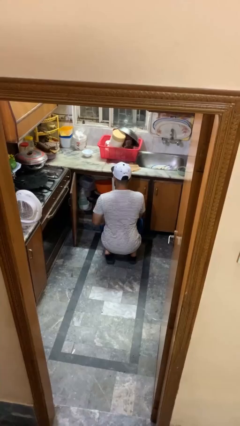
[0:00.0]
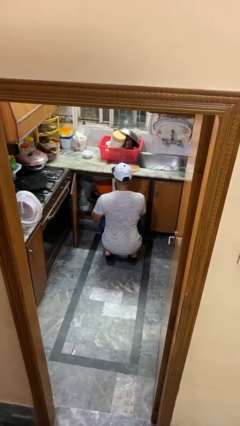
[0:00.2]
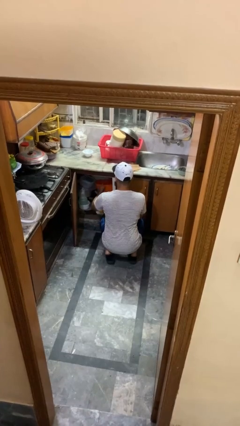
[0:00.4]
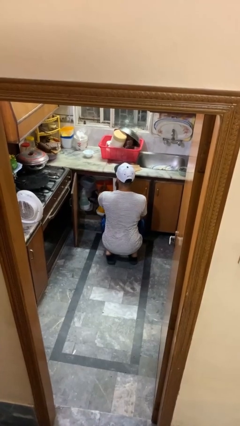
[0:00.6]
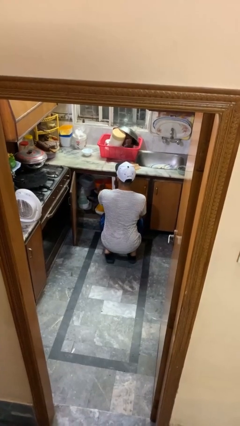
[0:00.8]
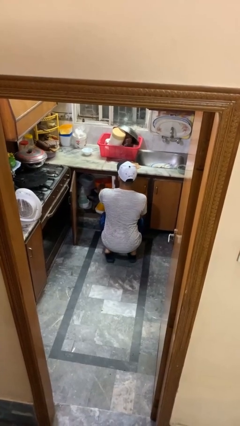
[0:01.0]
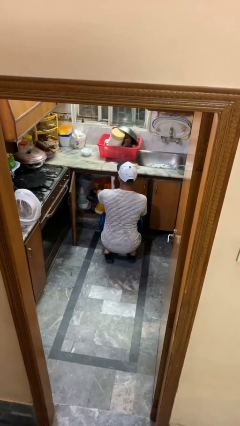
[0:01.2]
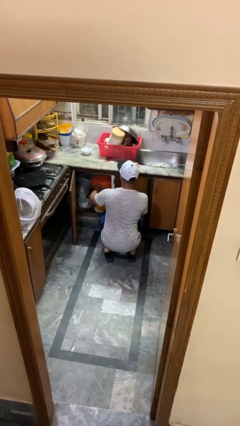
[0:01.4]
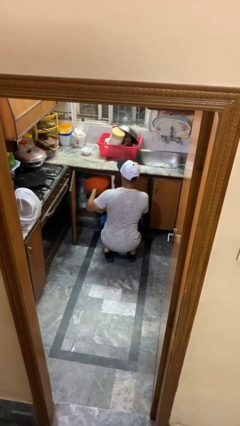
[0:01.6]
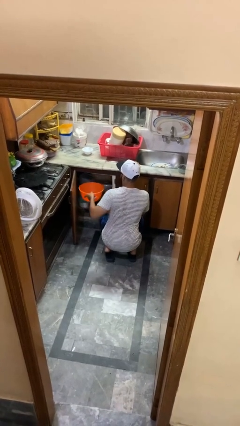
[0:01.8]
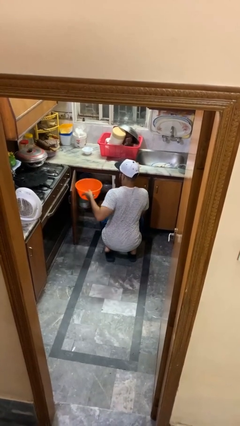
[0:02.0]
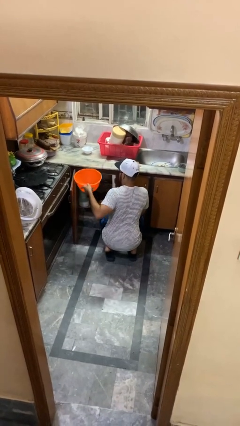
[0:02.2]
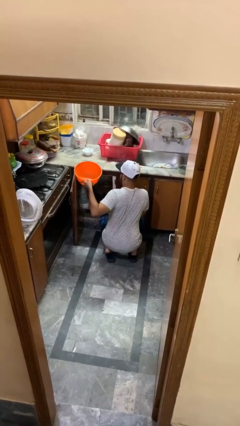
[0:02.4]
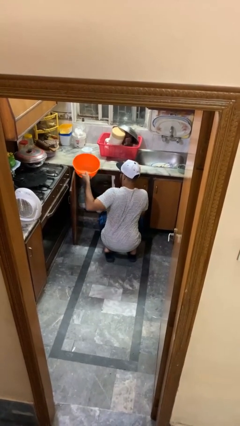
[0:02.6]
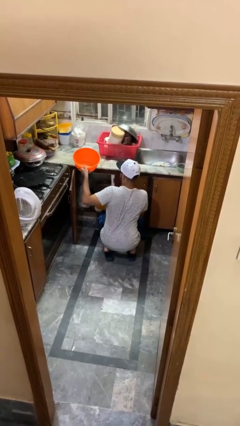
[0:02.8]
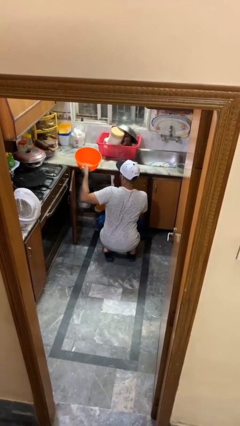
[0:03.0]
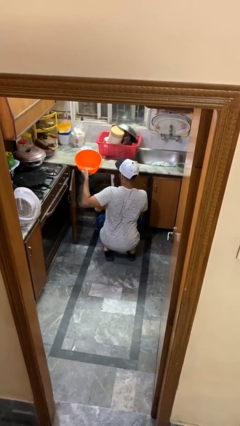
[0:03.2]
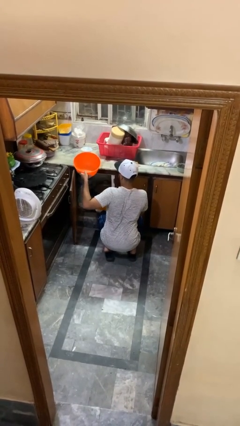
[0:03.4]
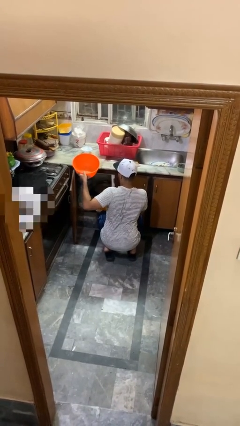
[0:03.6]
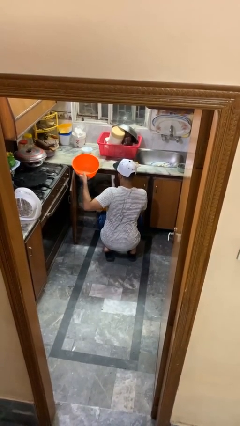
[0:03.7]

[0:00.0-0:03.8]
person takes object from kitchen drawer

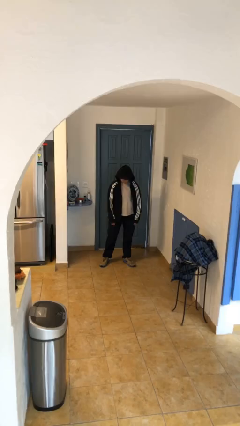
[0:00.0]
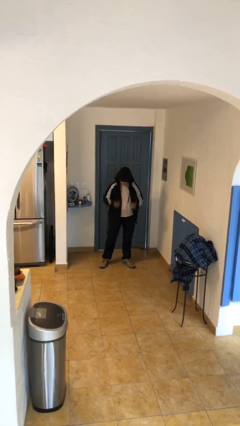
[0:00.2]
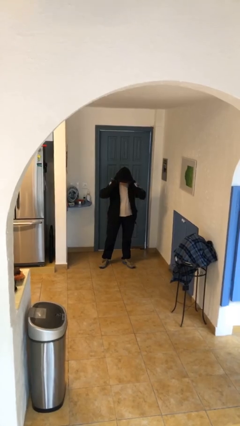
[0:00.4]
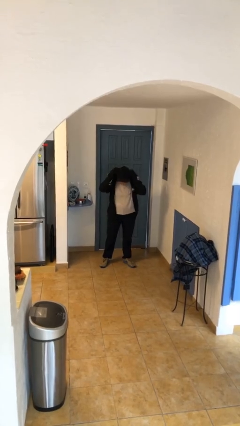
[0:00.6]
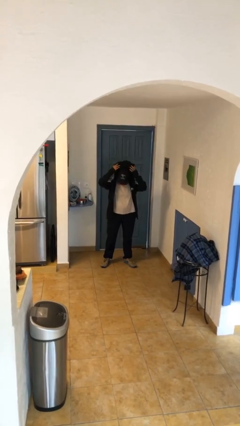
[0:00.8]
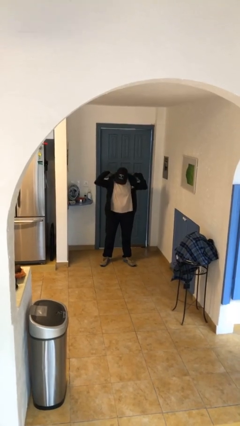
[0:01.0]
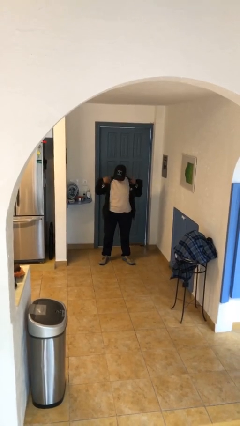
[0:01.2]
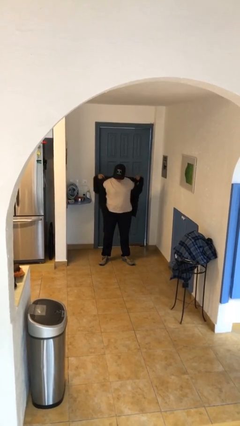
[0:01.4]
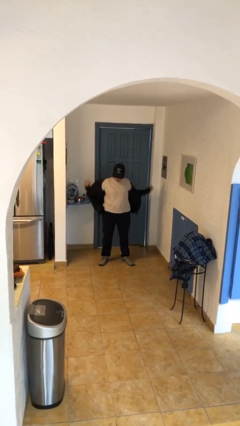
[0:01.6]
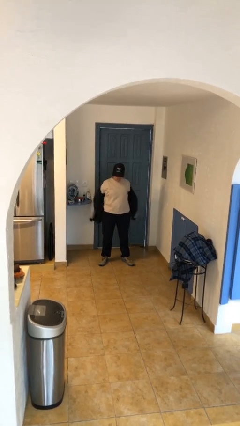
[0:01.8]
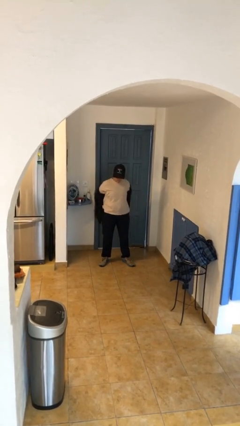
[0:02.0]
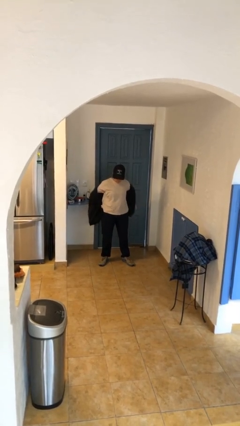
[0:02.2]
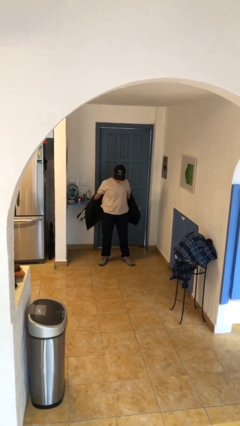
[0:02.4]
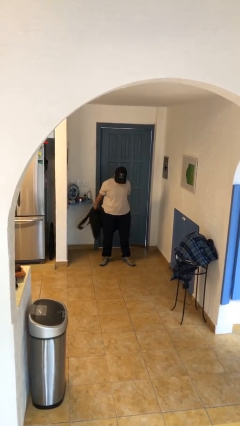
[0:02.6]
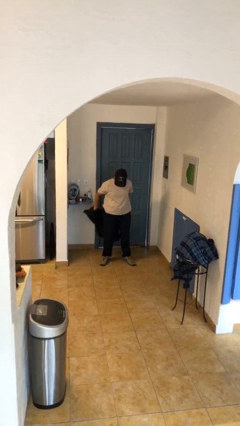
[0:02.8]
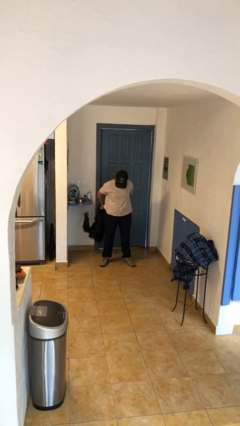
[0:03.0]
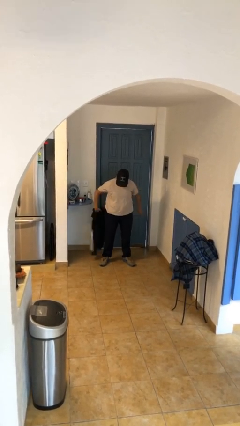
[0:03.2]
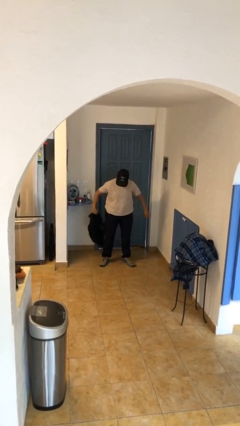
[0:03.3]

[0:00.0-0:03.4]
person takes off hoodie

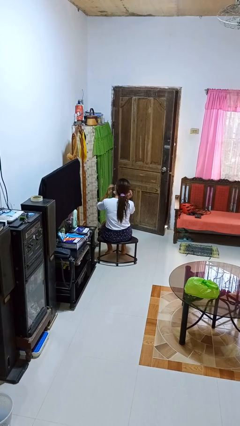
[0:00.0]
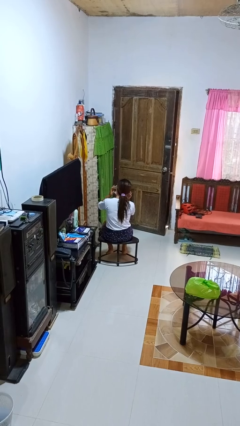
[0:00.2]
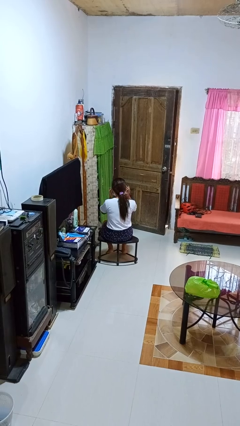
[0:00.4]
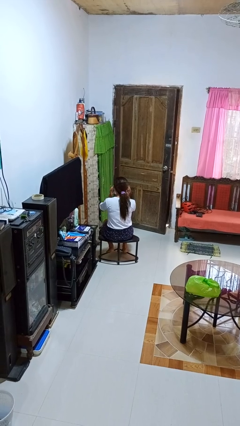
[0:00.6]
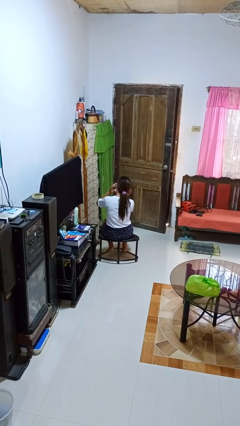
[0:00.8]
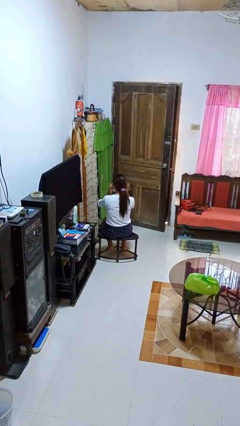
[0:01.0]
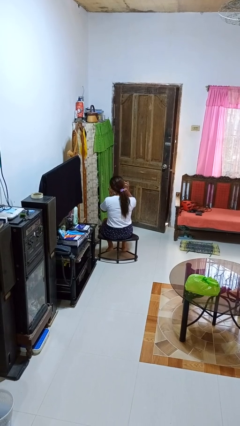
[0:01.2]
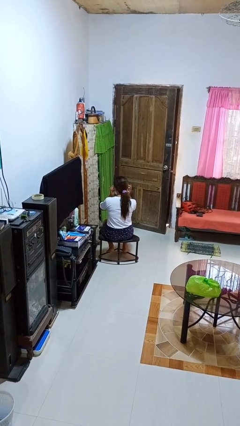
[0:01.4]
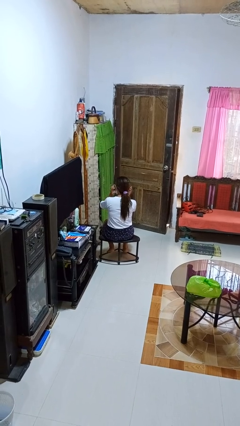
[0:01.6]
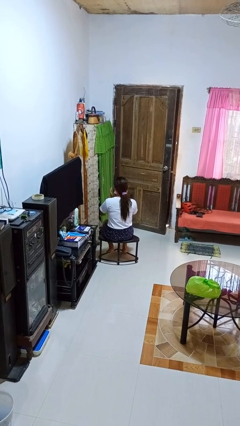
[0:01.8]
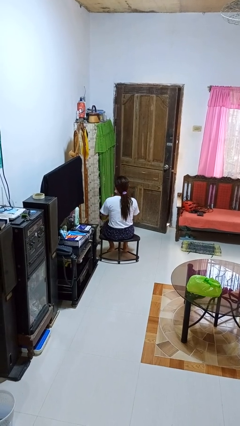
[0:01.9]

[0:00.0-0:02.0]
person puts fingers in ear

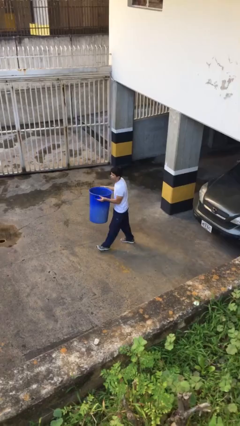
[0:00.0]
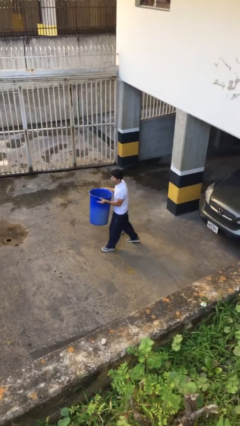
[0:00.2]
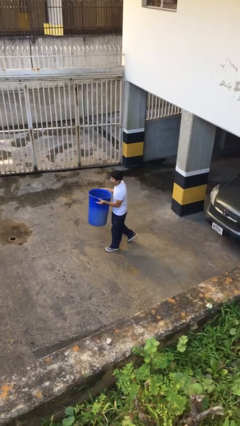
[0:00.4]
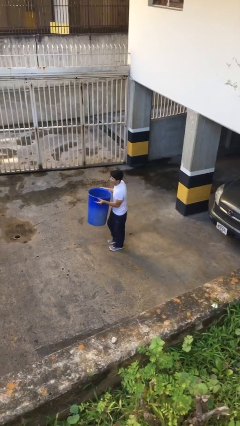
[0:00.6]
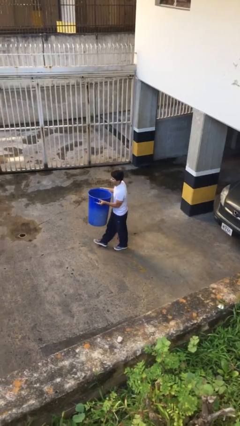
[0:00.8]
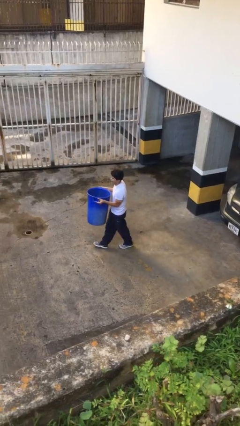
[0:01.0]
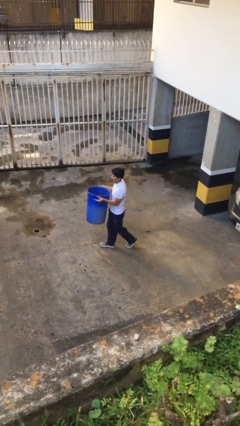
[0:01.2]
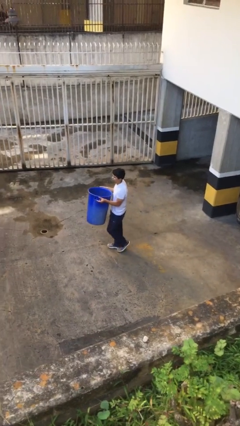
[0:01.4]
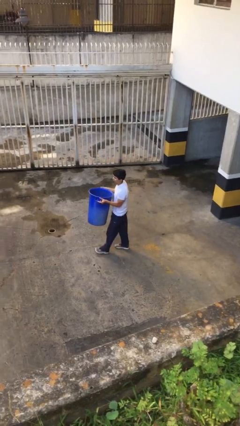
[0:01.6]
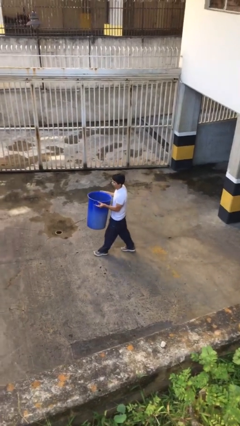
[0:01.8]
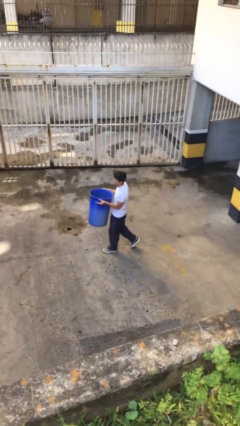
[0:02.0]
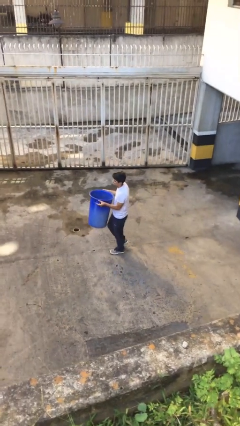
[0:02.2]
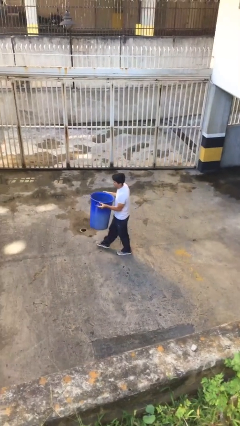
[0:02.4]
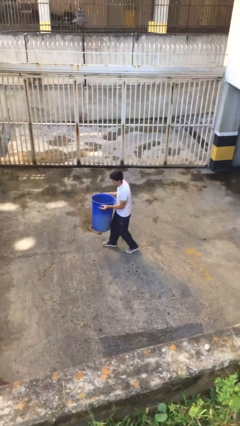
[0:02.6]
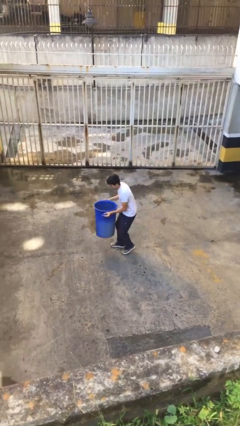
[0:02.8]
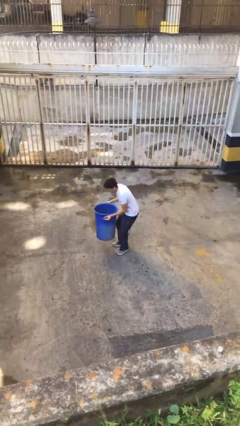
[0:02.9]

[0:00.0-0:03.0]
person carries heavy object

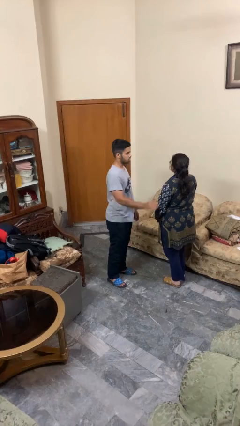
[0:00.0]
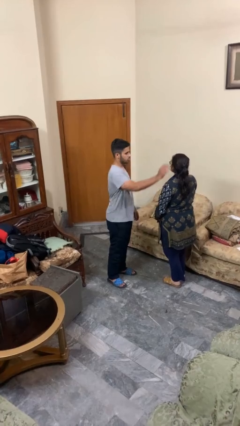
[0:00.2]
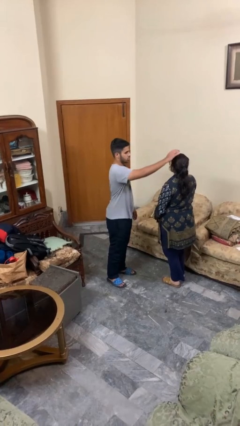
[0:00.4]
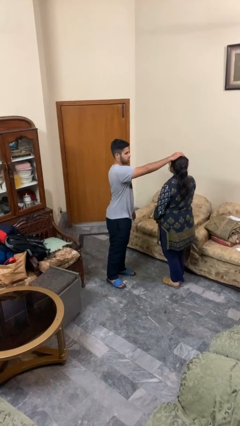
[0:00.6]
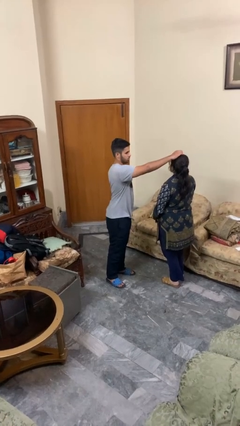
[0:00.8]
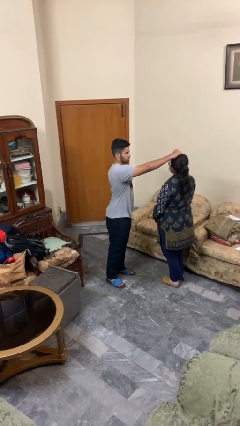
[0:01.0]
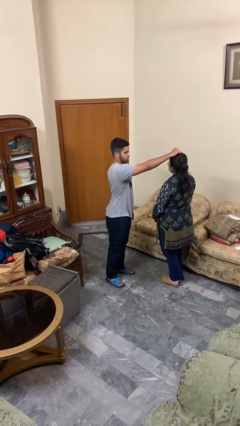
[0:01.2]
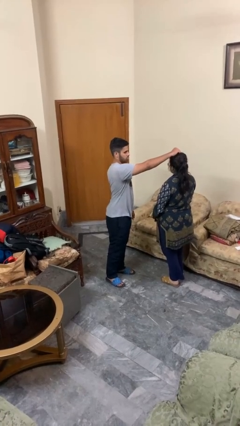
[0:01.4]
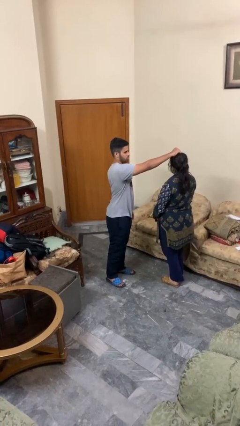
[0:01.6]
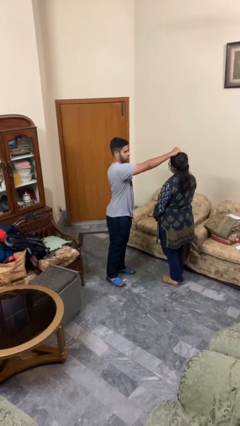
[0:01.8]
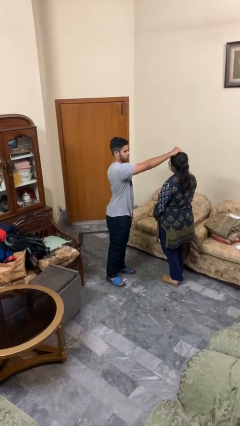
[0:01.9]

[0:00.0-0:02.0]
person grabs person by hair

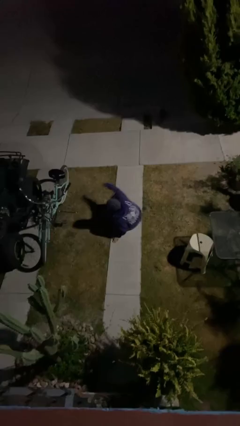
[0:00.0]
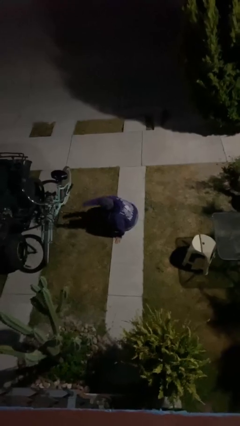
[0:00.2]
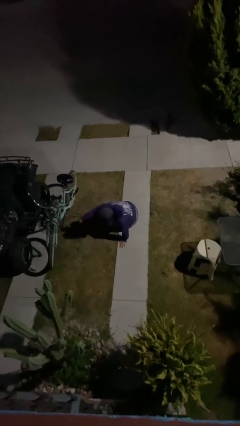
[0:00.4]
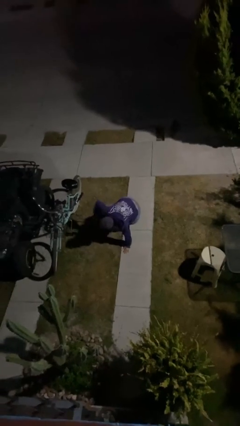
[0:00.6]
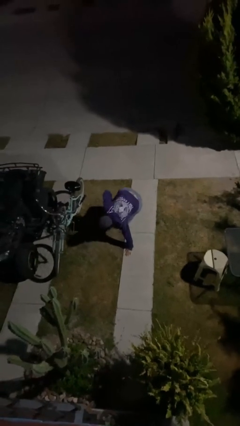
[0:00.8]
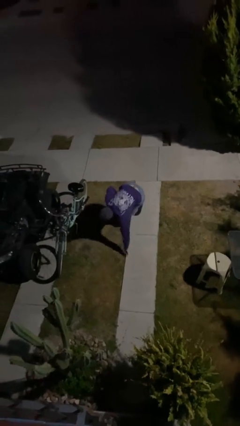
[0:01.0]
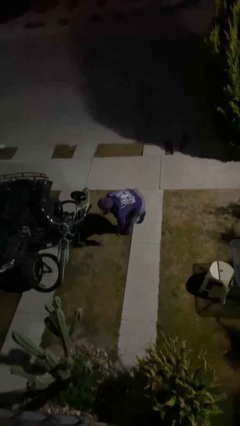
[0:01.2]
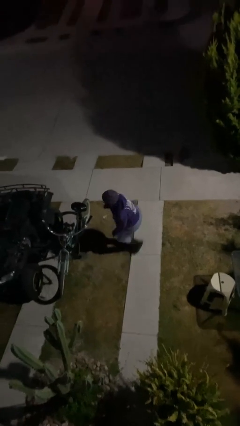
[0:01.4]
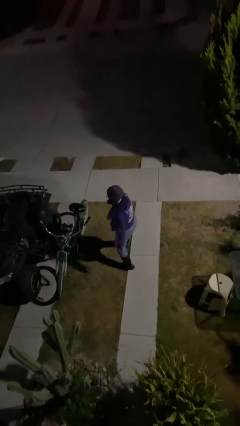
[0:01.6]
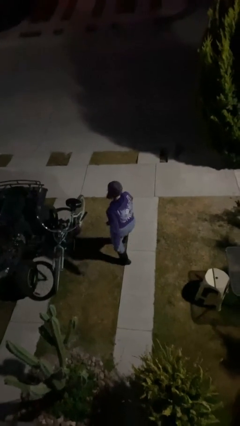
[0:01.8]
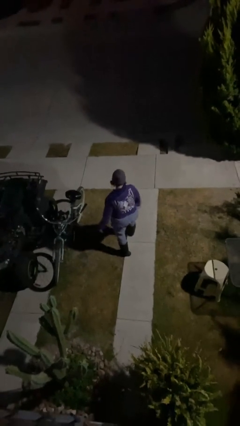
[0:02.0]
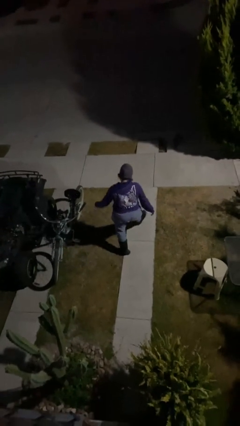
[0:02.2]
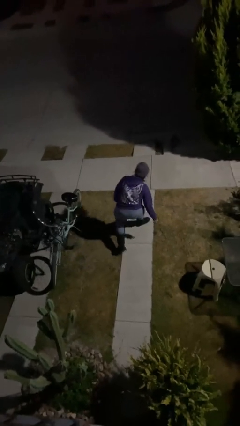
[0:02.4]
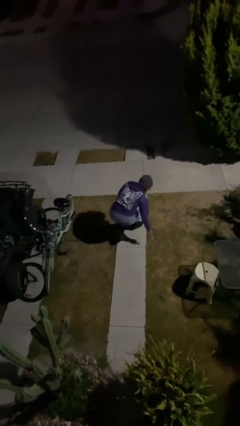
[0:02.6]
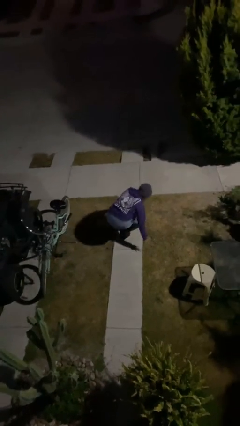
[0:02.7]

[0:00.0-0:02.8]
person stands up

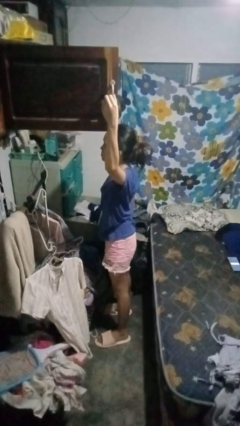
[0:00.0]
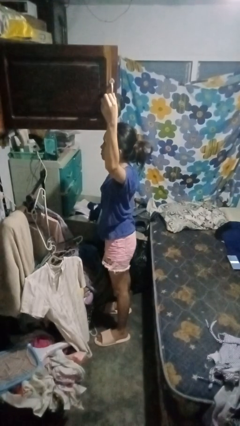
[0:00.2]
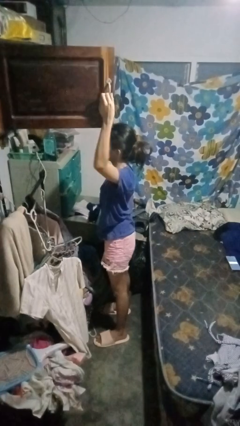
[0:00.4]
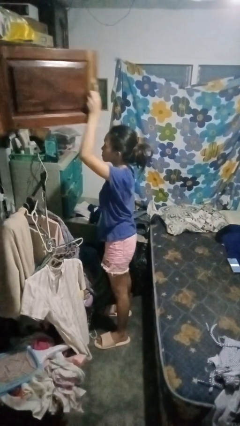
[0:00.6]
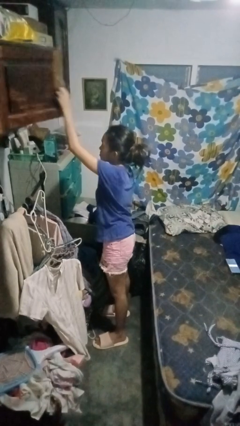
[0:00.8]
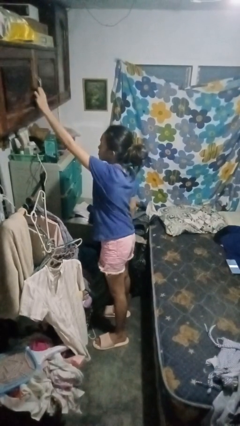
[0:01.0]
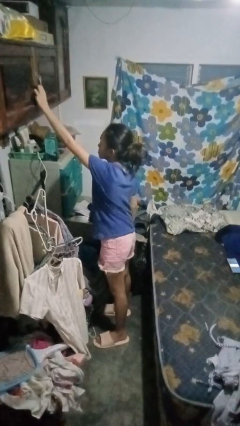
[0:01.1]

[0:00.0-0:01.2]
person closes closet door
